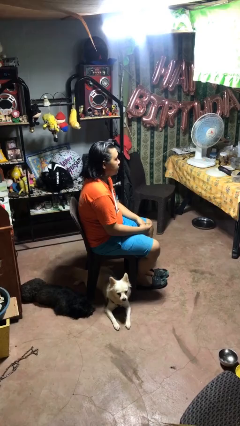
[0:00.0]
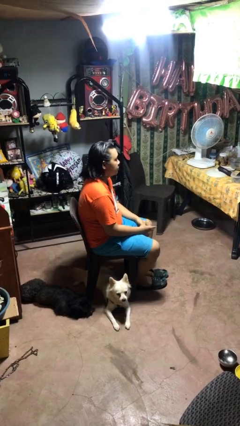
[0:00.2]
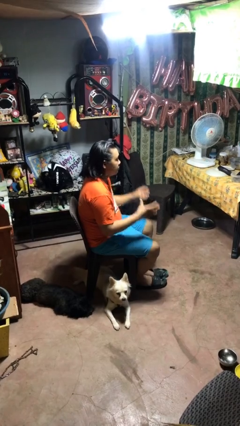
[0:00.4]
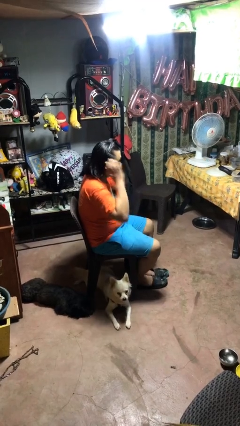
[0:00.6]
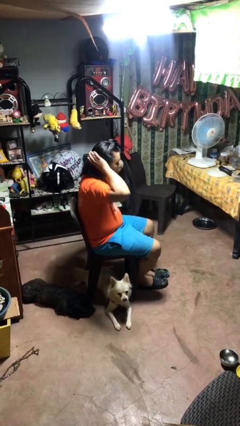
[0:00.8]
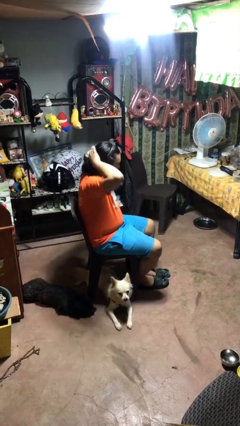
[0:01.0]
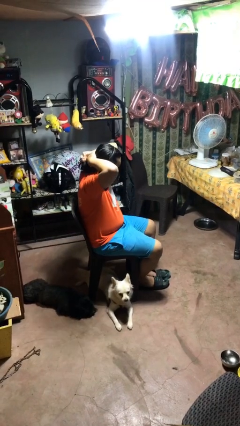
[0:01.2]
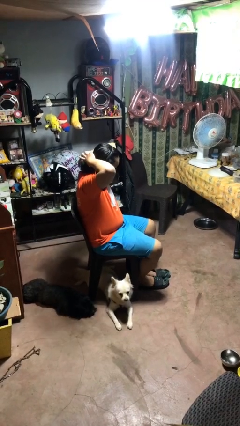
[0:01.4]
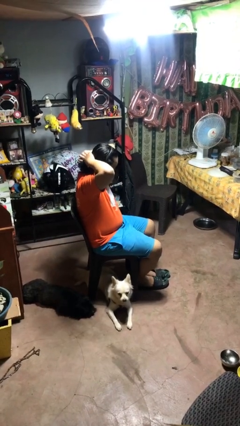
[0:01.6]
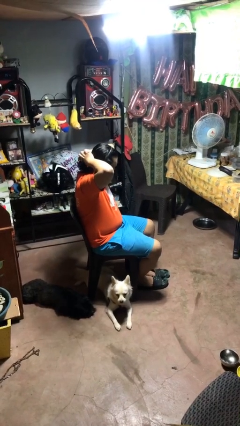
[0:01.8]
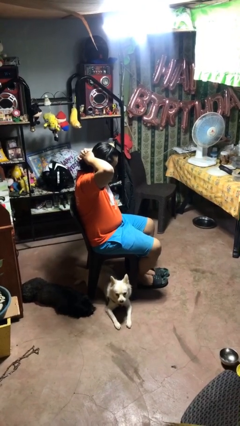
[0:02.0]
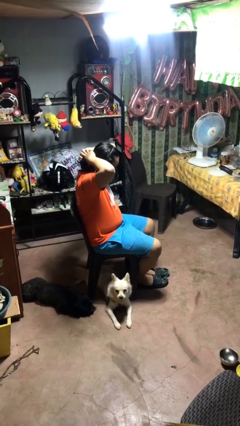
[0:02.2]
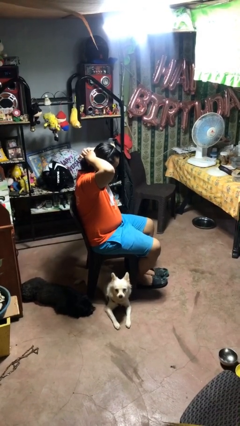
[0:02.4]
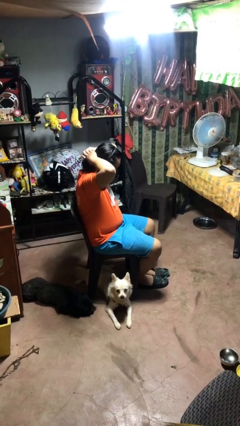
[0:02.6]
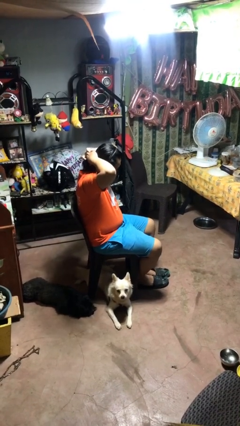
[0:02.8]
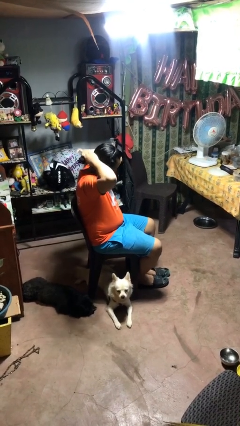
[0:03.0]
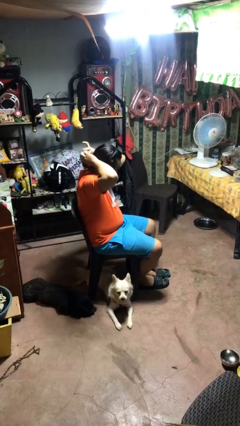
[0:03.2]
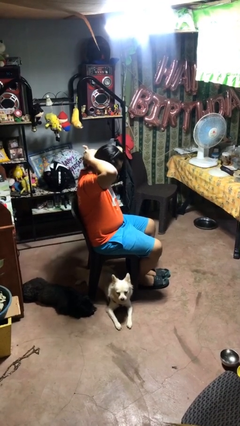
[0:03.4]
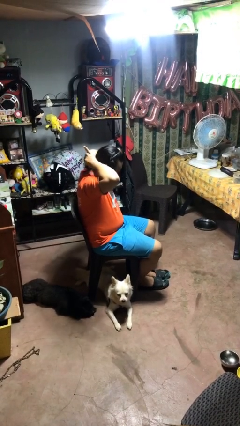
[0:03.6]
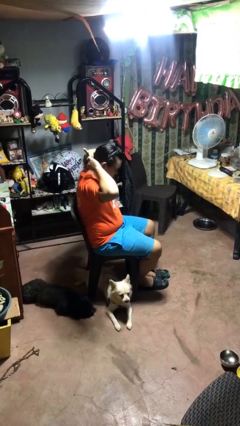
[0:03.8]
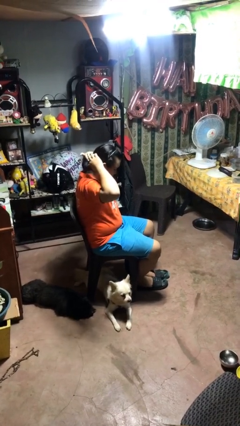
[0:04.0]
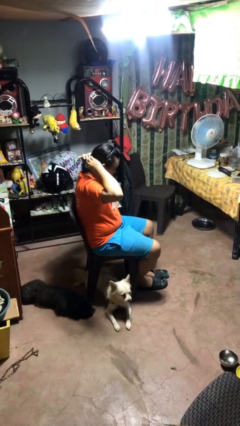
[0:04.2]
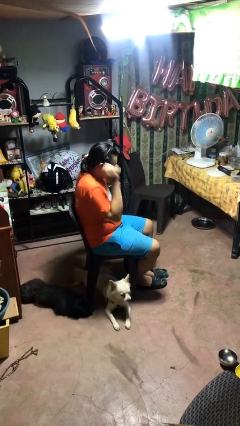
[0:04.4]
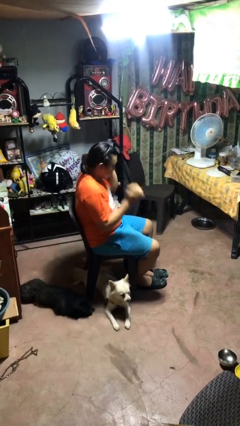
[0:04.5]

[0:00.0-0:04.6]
person puts hair in ponytail

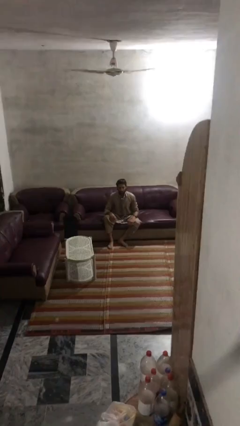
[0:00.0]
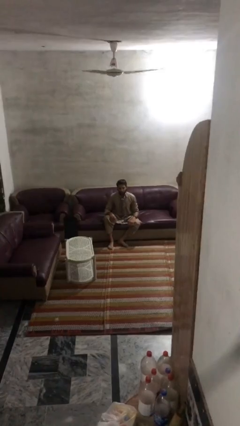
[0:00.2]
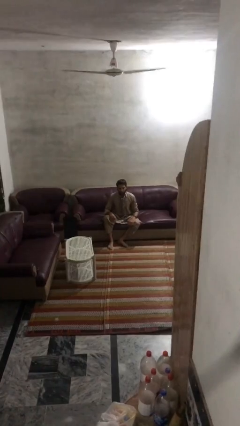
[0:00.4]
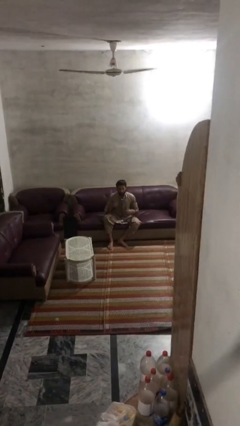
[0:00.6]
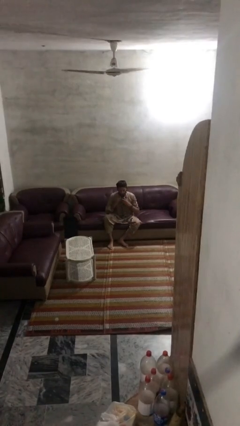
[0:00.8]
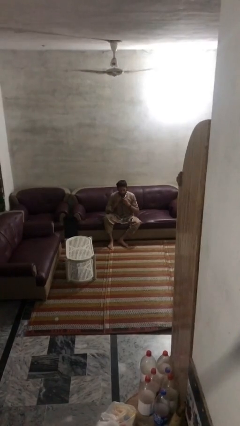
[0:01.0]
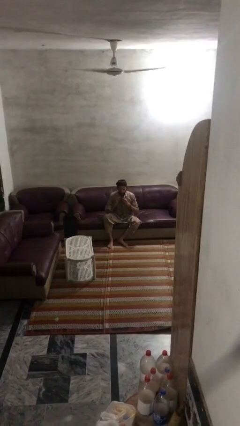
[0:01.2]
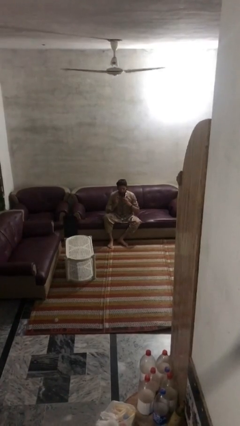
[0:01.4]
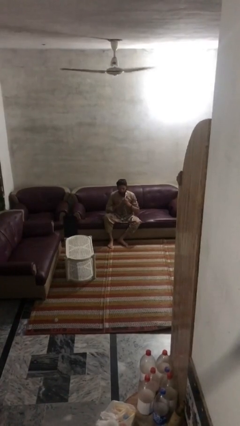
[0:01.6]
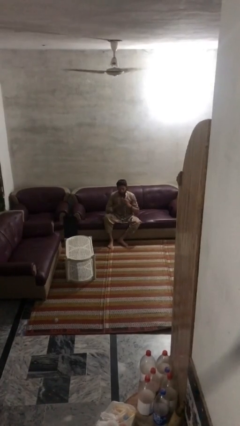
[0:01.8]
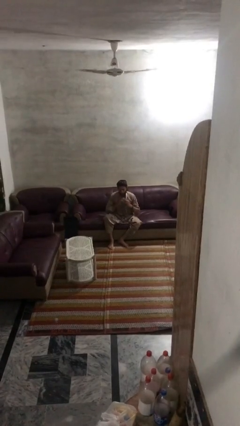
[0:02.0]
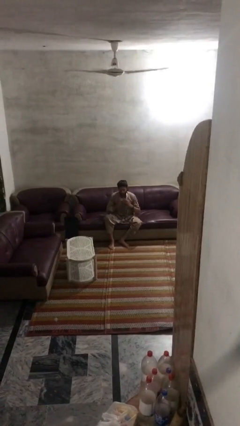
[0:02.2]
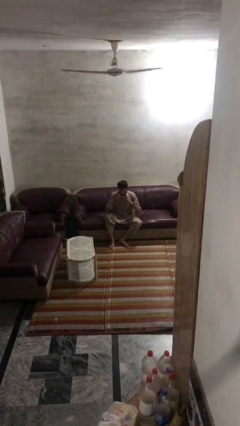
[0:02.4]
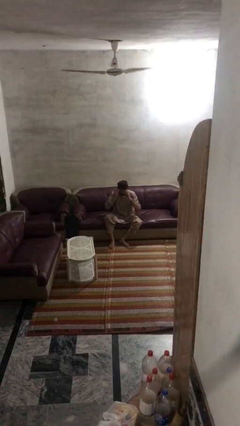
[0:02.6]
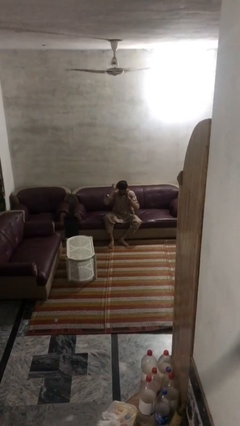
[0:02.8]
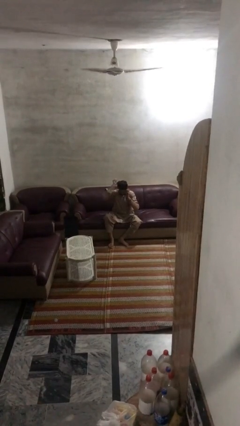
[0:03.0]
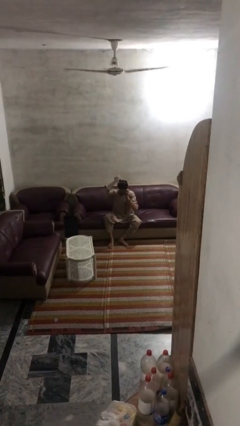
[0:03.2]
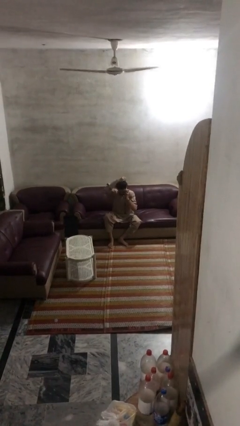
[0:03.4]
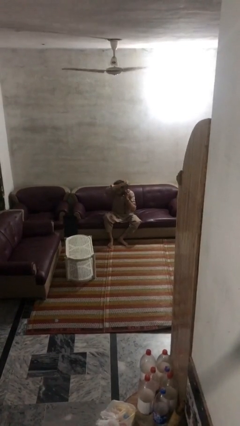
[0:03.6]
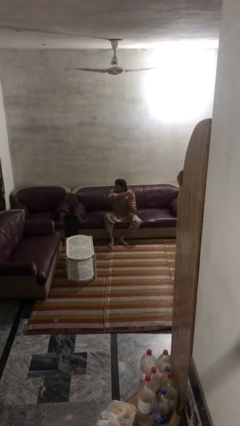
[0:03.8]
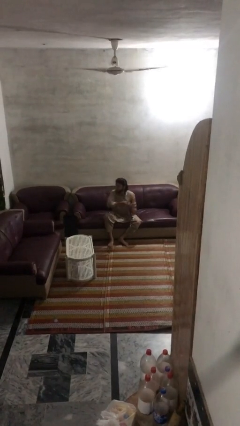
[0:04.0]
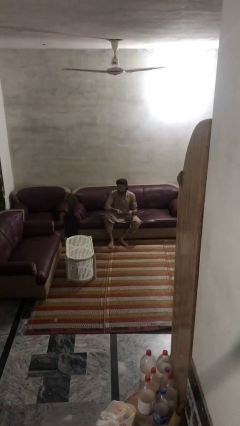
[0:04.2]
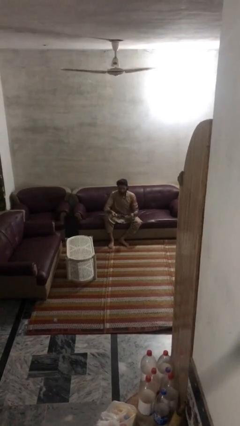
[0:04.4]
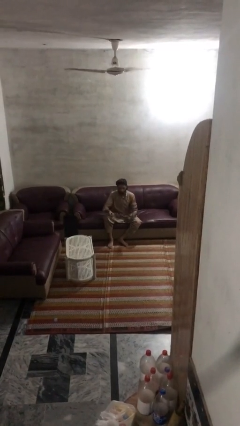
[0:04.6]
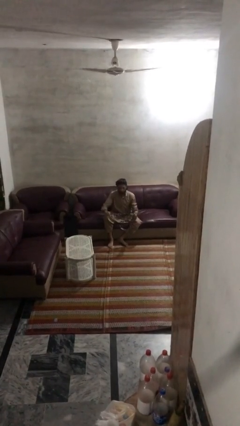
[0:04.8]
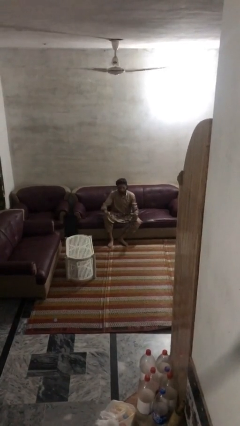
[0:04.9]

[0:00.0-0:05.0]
person takes off necktie

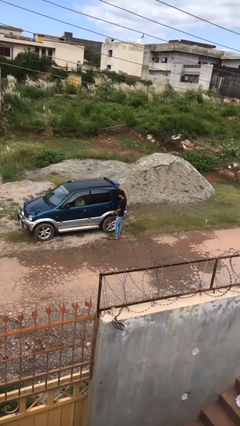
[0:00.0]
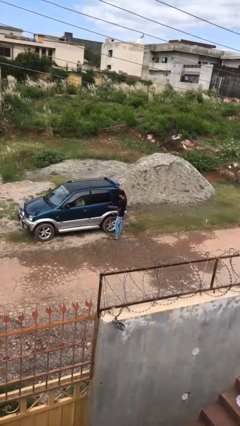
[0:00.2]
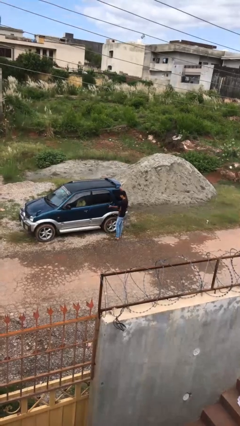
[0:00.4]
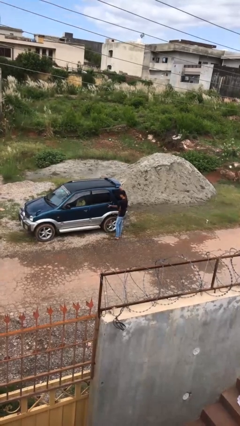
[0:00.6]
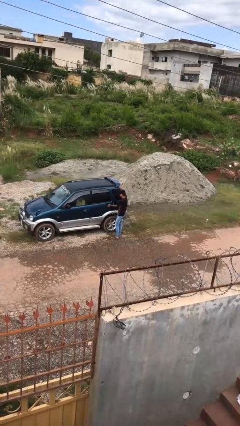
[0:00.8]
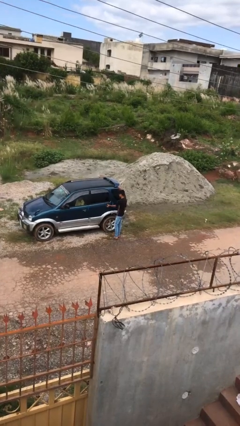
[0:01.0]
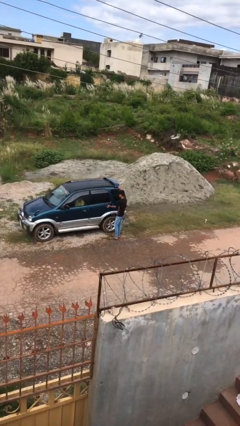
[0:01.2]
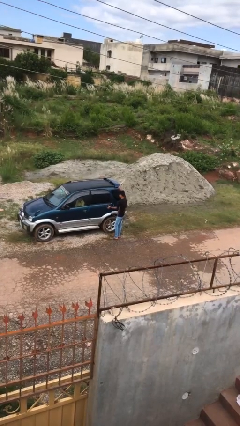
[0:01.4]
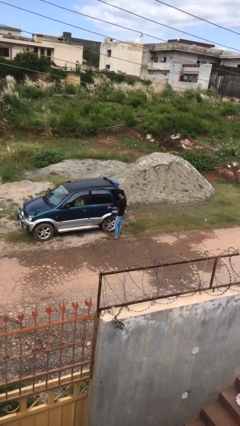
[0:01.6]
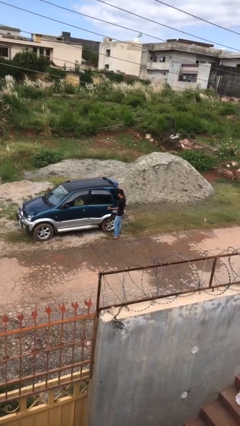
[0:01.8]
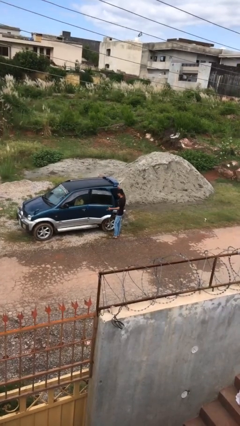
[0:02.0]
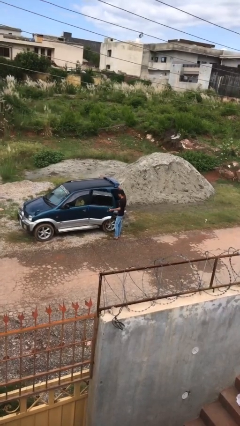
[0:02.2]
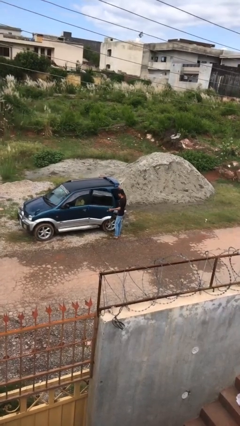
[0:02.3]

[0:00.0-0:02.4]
person opens car door

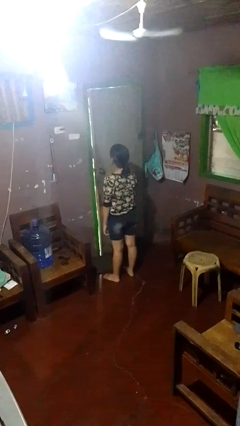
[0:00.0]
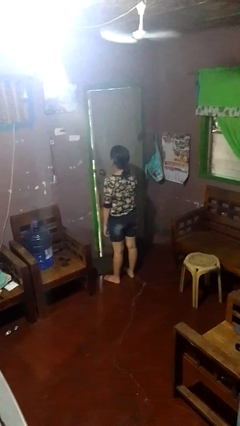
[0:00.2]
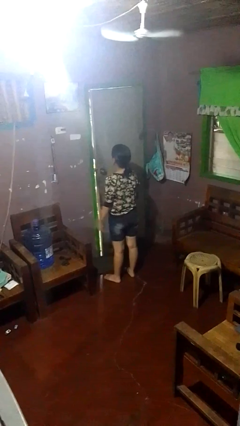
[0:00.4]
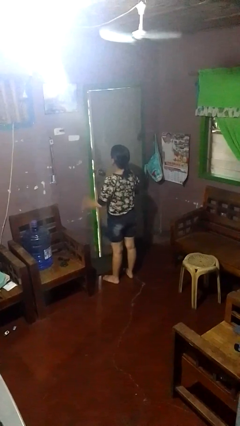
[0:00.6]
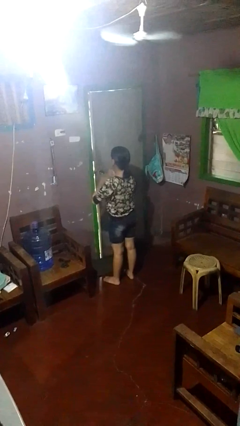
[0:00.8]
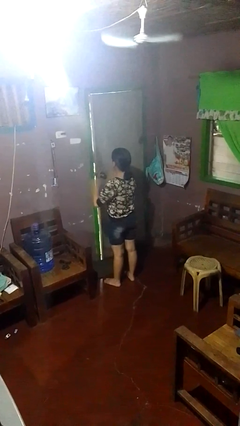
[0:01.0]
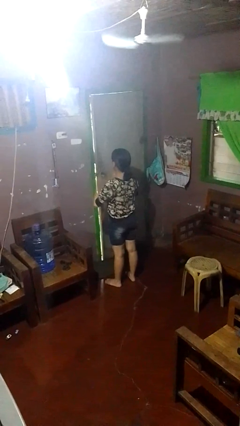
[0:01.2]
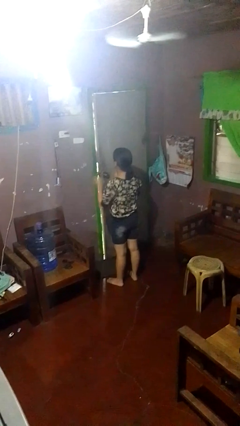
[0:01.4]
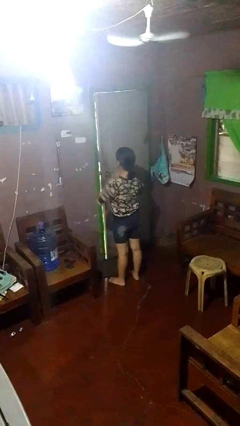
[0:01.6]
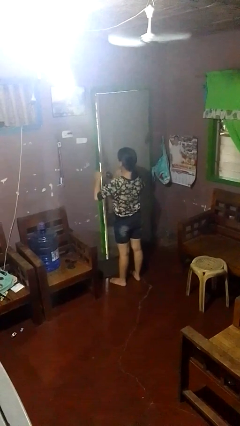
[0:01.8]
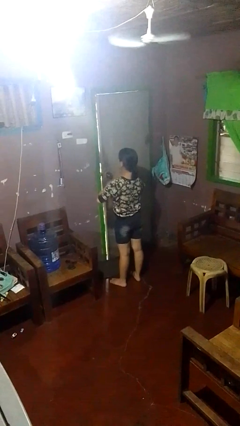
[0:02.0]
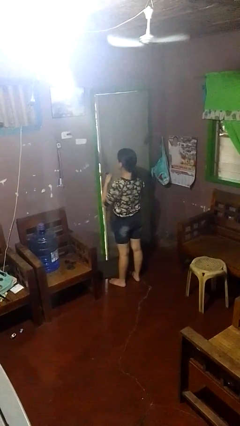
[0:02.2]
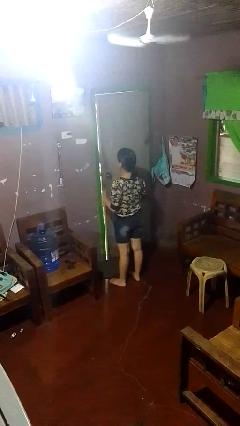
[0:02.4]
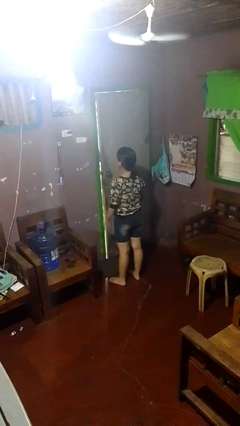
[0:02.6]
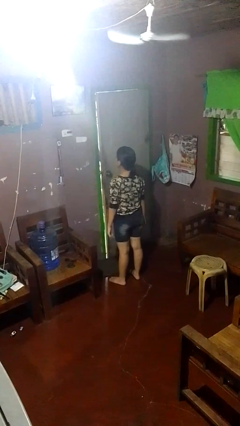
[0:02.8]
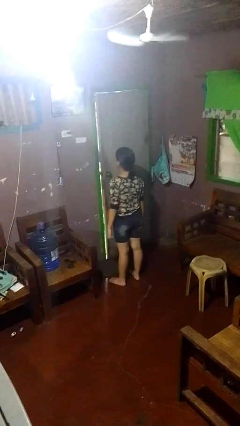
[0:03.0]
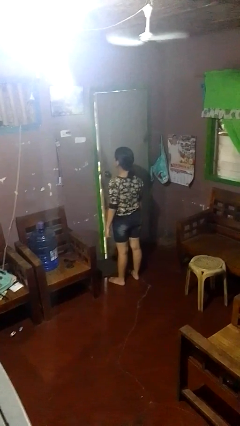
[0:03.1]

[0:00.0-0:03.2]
person drums on chest

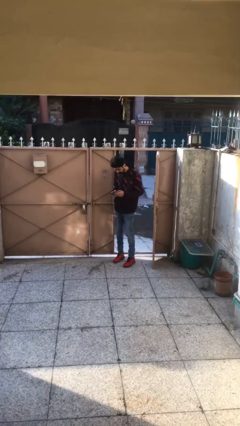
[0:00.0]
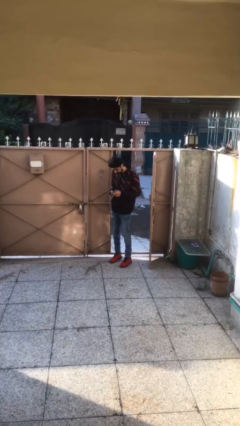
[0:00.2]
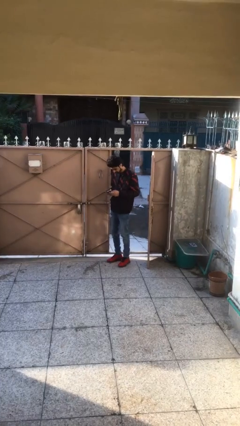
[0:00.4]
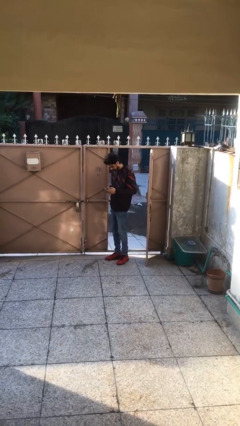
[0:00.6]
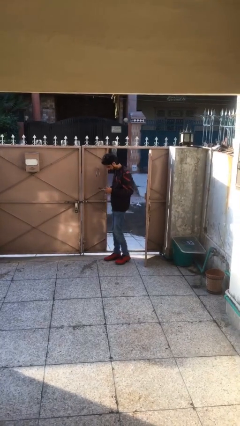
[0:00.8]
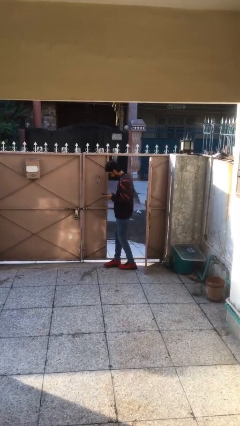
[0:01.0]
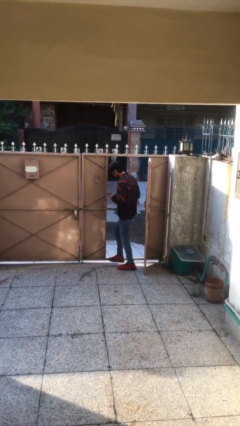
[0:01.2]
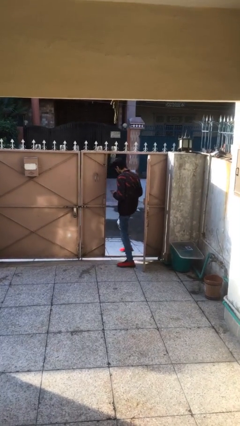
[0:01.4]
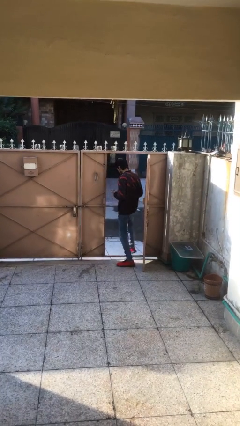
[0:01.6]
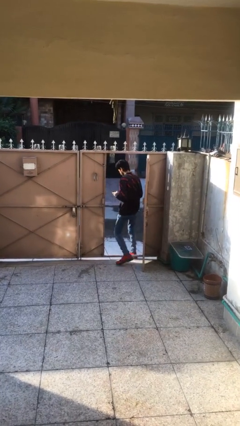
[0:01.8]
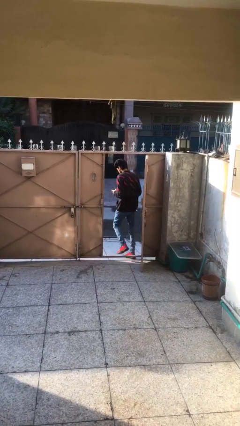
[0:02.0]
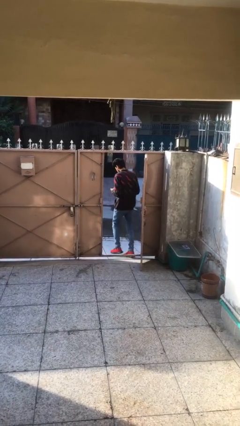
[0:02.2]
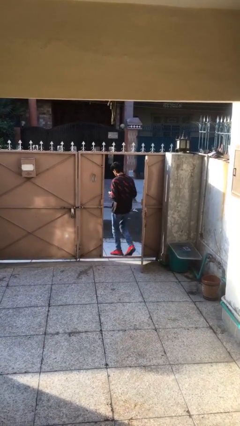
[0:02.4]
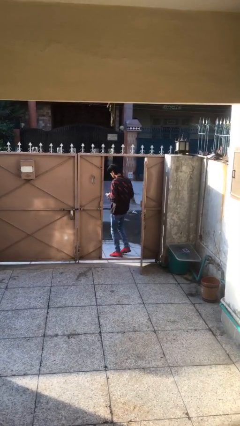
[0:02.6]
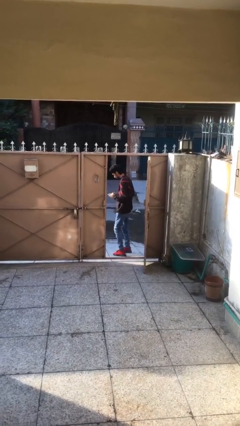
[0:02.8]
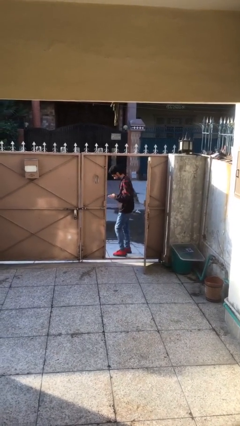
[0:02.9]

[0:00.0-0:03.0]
person exits scene through structure
